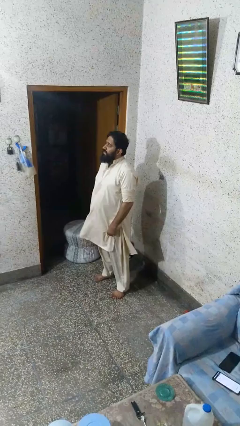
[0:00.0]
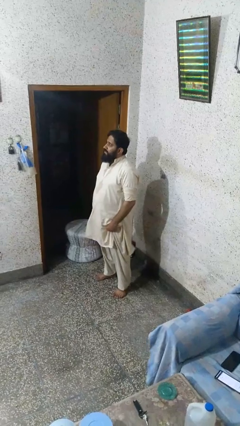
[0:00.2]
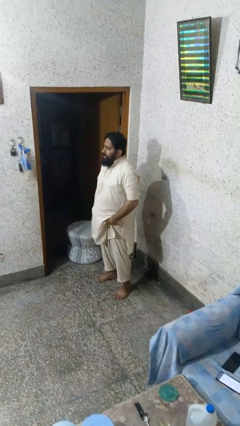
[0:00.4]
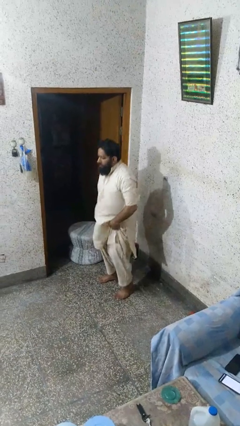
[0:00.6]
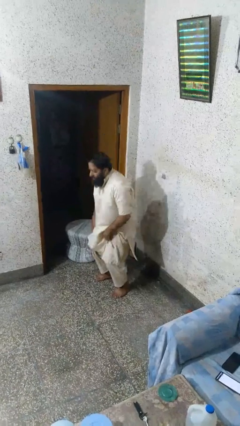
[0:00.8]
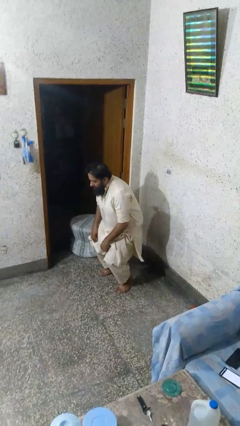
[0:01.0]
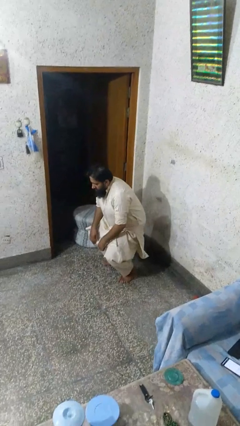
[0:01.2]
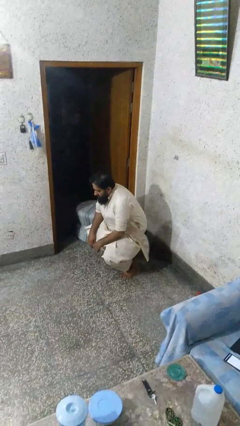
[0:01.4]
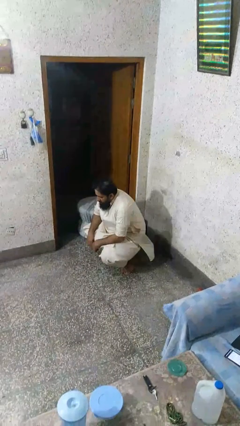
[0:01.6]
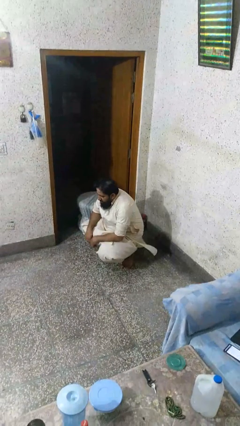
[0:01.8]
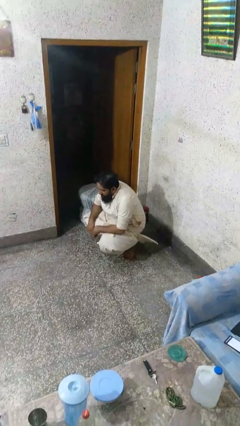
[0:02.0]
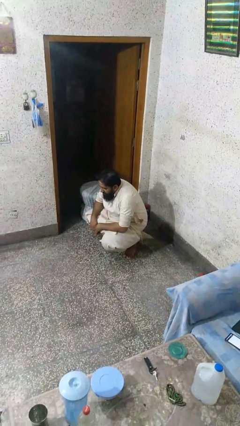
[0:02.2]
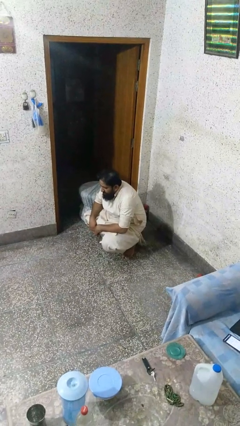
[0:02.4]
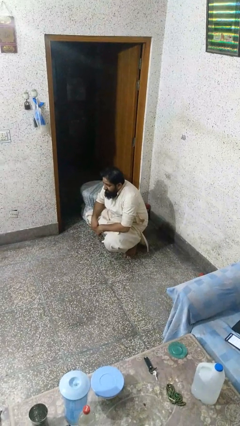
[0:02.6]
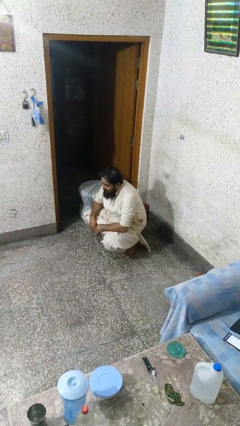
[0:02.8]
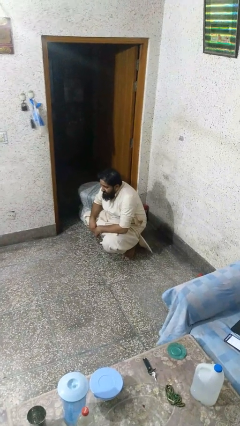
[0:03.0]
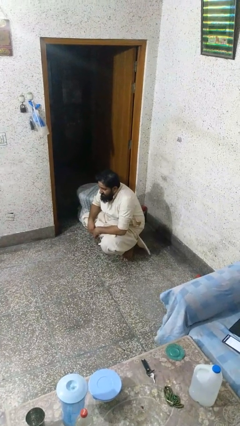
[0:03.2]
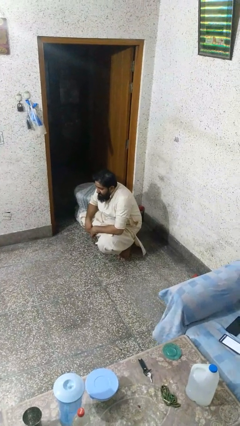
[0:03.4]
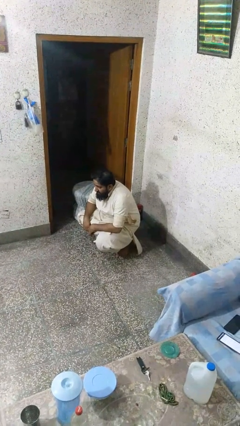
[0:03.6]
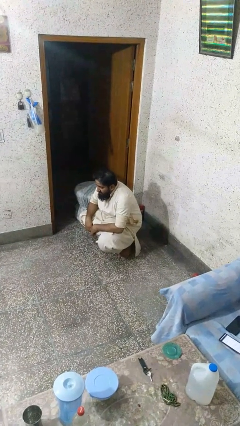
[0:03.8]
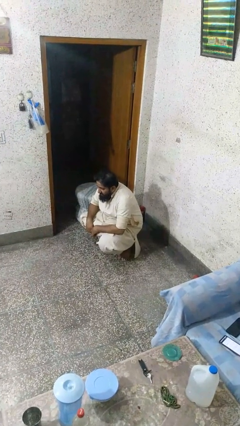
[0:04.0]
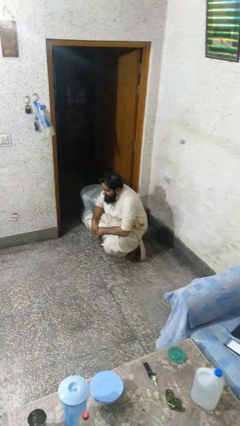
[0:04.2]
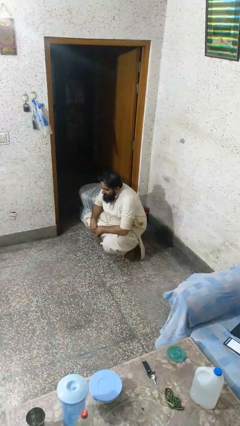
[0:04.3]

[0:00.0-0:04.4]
person squats

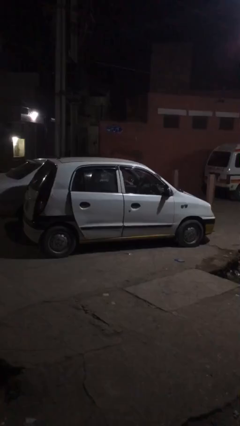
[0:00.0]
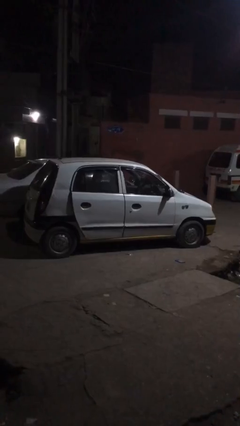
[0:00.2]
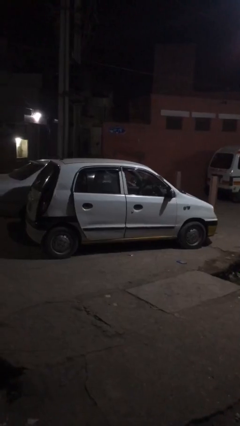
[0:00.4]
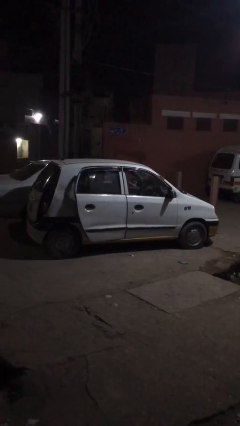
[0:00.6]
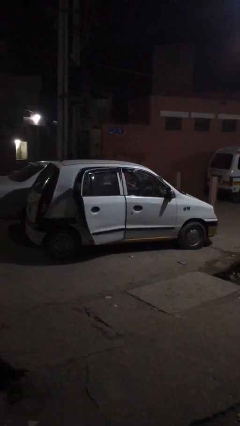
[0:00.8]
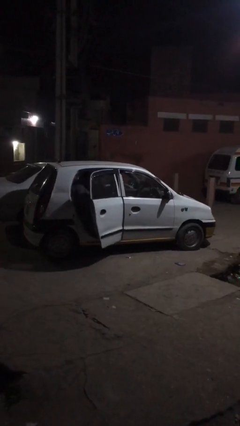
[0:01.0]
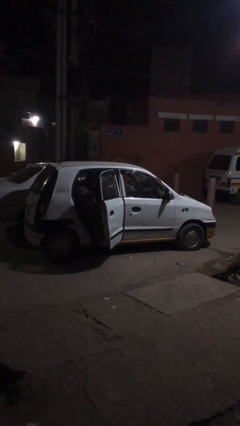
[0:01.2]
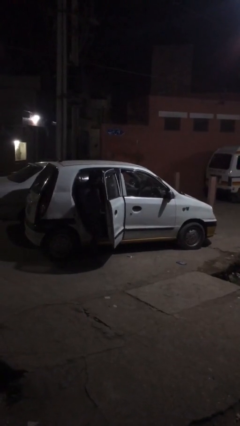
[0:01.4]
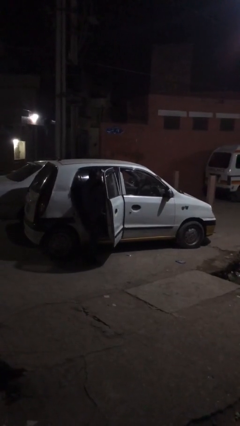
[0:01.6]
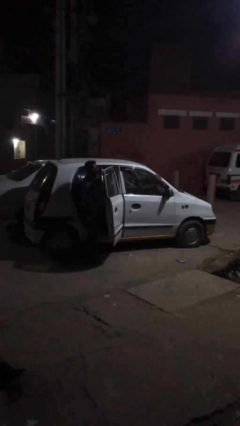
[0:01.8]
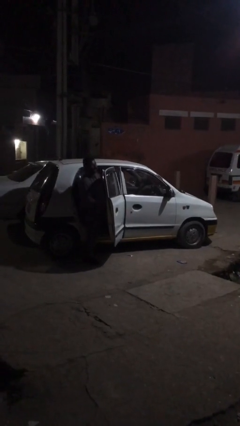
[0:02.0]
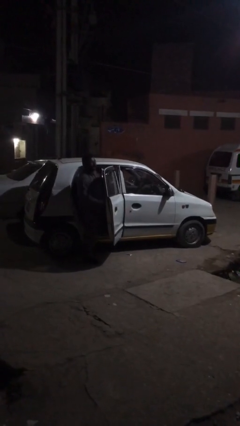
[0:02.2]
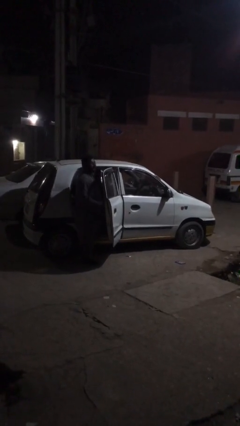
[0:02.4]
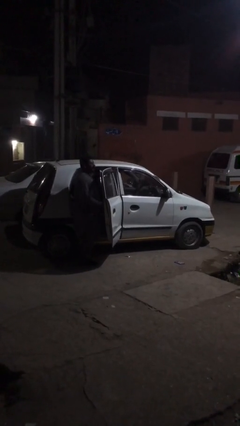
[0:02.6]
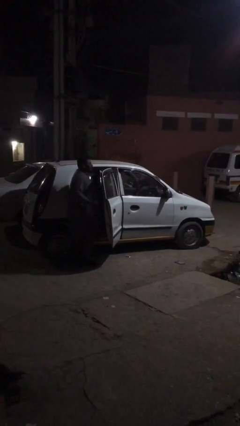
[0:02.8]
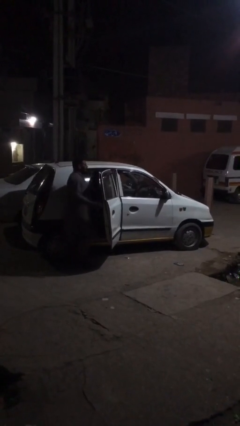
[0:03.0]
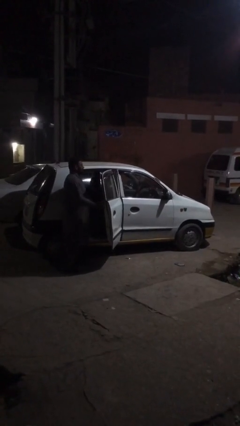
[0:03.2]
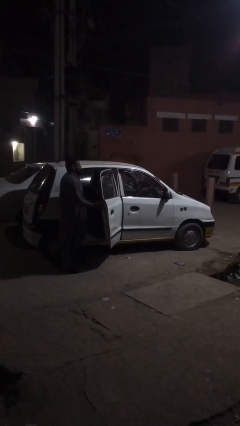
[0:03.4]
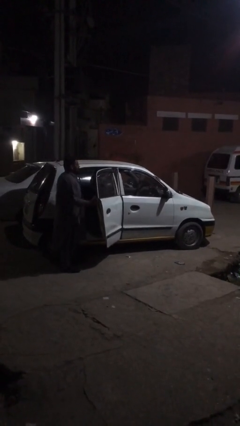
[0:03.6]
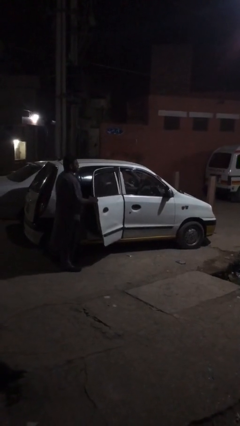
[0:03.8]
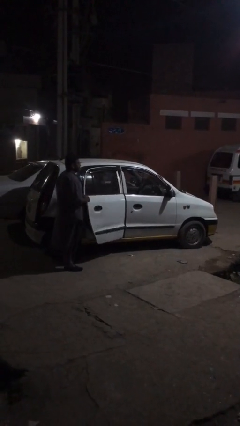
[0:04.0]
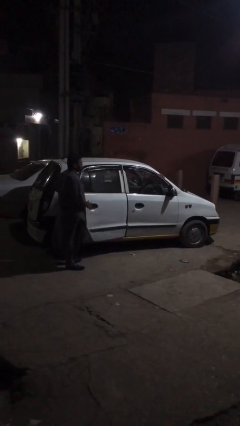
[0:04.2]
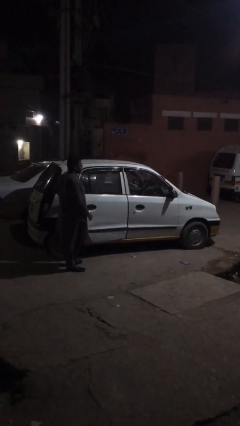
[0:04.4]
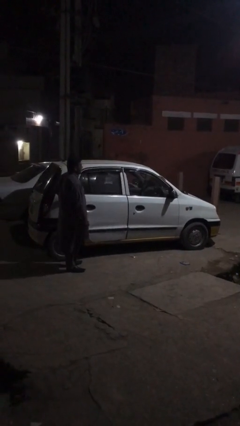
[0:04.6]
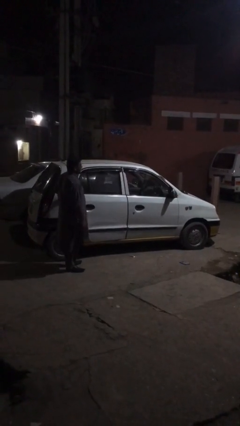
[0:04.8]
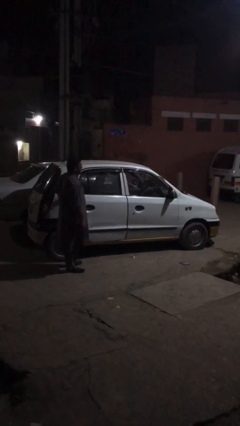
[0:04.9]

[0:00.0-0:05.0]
car drops off person

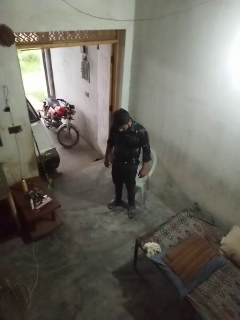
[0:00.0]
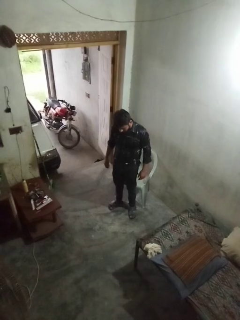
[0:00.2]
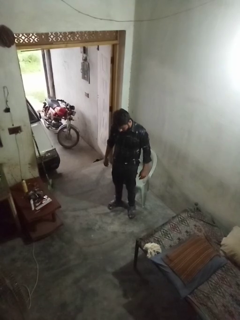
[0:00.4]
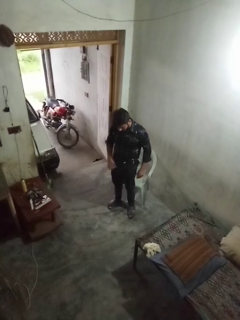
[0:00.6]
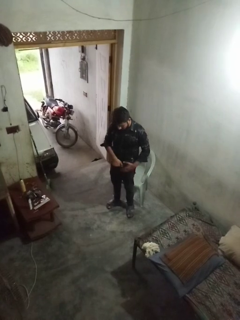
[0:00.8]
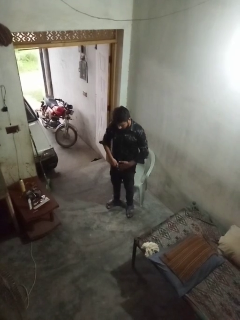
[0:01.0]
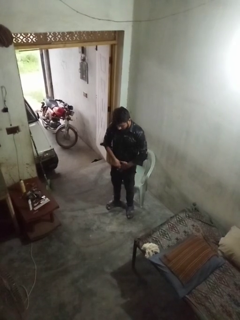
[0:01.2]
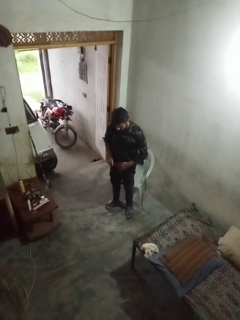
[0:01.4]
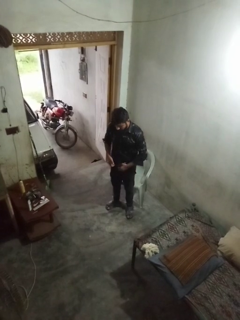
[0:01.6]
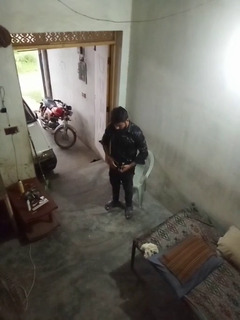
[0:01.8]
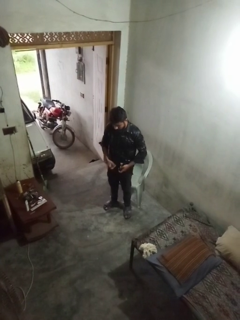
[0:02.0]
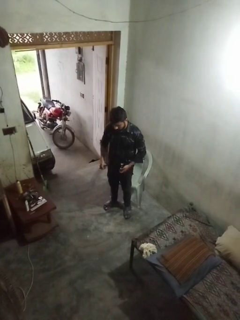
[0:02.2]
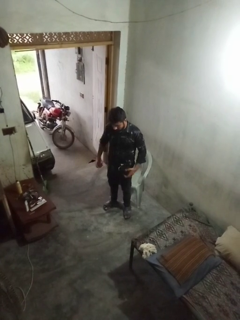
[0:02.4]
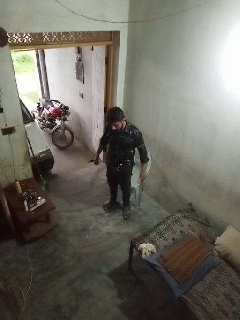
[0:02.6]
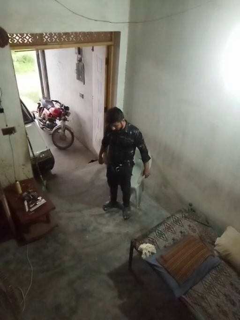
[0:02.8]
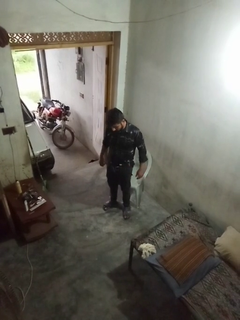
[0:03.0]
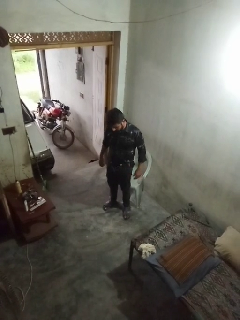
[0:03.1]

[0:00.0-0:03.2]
person takes off belt

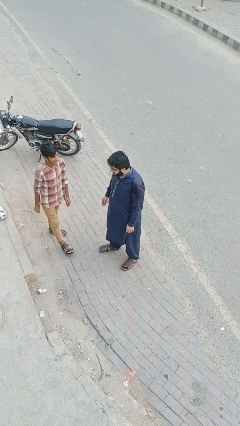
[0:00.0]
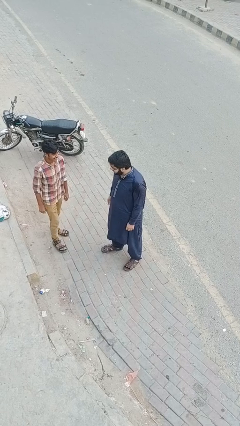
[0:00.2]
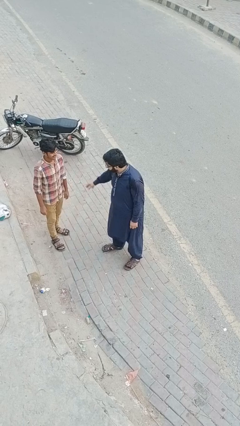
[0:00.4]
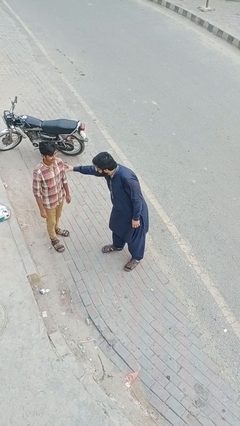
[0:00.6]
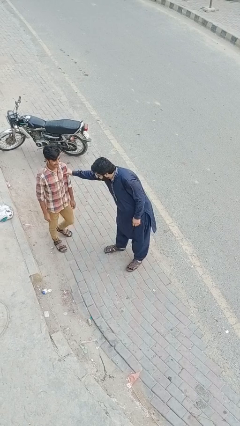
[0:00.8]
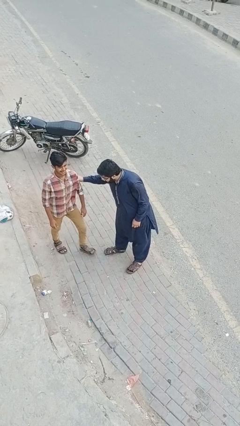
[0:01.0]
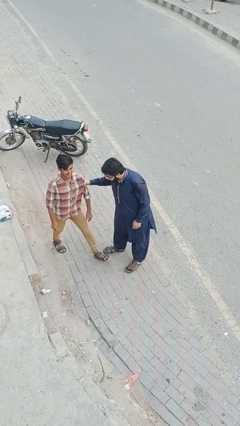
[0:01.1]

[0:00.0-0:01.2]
person grabs person by bicep

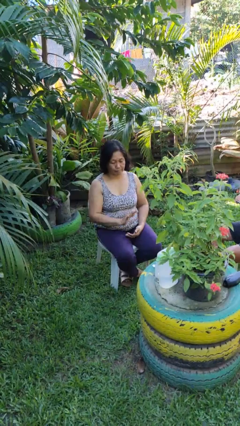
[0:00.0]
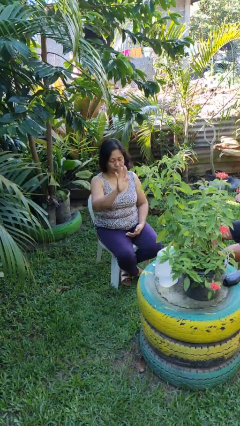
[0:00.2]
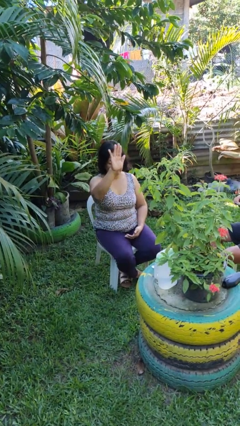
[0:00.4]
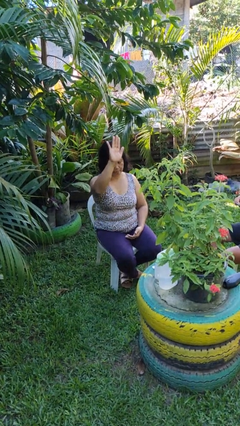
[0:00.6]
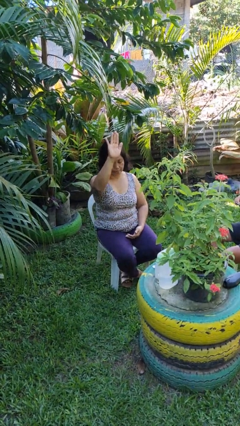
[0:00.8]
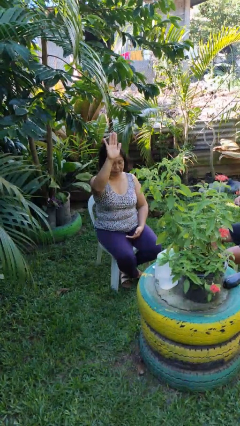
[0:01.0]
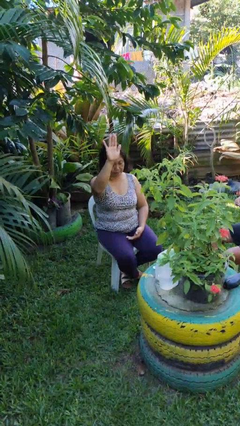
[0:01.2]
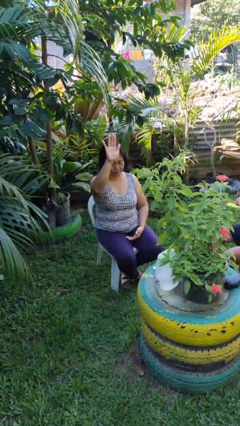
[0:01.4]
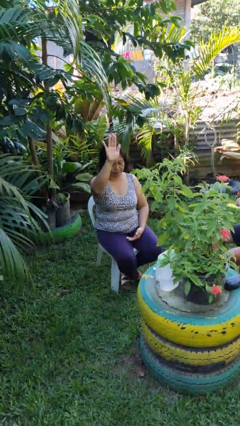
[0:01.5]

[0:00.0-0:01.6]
person gestures swipe up

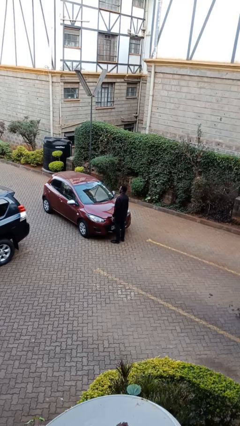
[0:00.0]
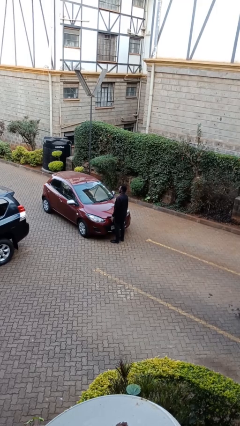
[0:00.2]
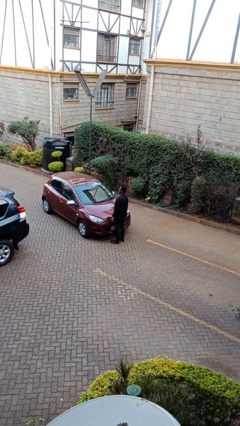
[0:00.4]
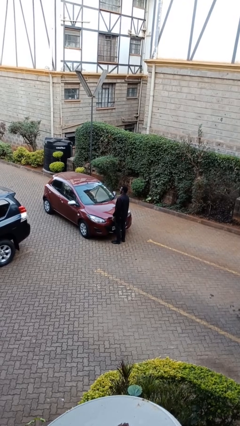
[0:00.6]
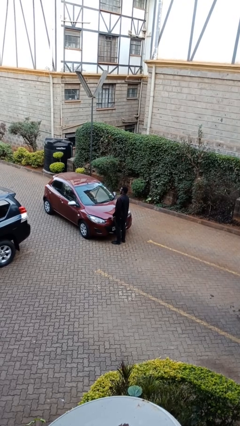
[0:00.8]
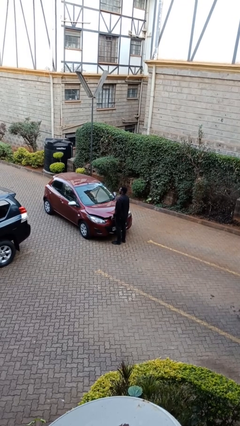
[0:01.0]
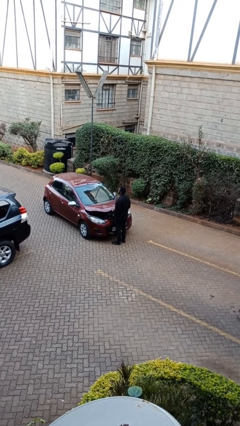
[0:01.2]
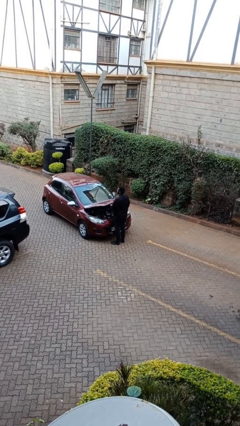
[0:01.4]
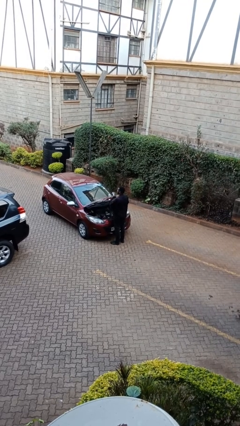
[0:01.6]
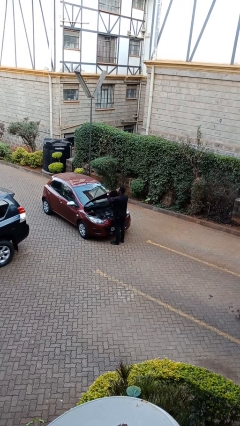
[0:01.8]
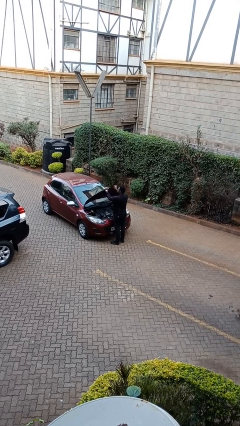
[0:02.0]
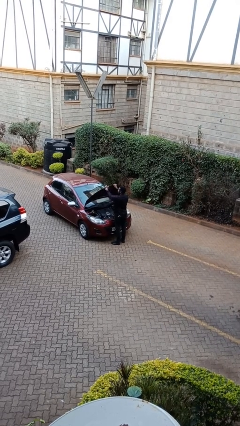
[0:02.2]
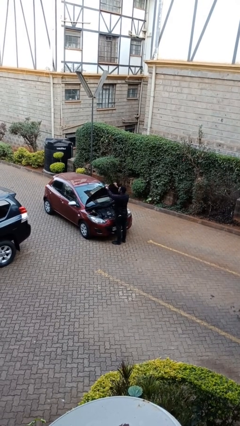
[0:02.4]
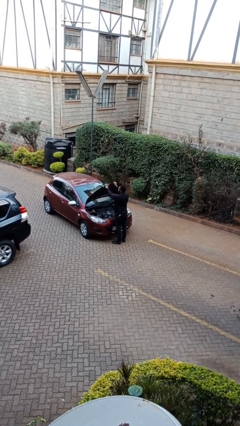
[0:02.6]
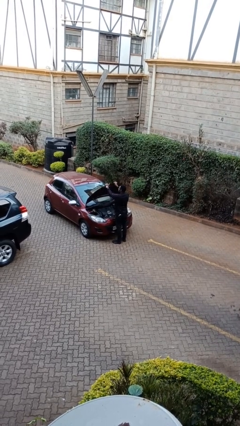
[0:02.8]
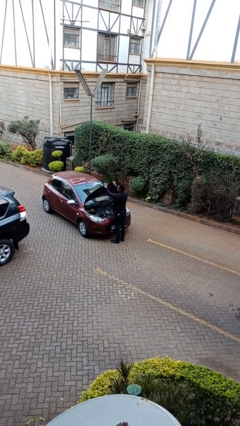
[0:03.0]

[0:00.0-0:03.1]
person opens car hood
